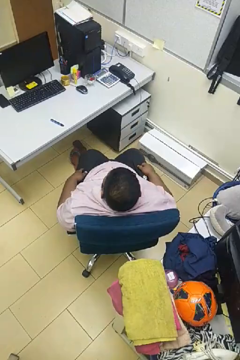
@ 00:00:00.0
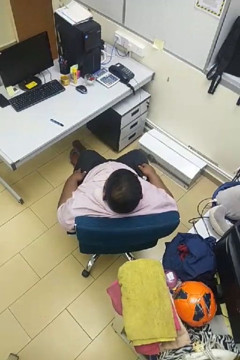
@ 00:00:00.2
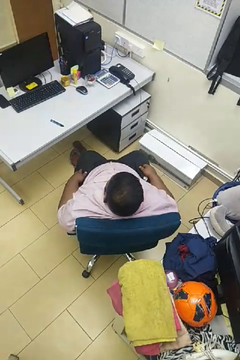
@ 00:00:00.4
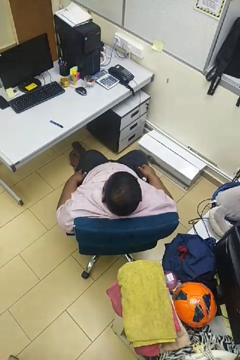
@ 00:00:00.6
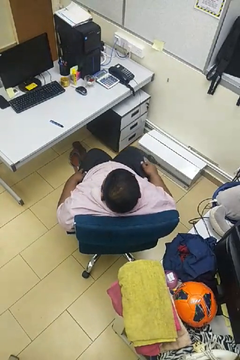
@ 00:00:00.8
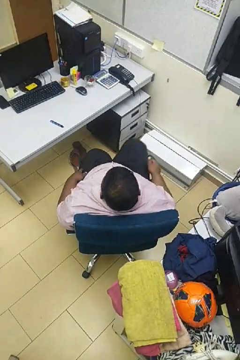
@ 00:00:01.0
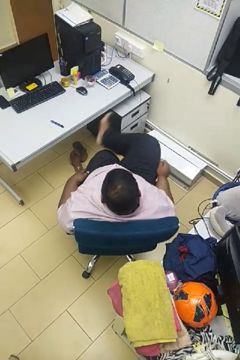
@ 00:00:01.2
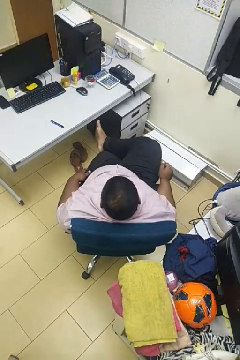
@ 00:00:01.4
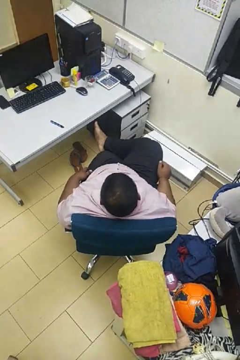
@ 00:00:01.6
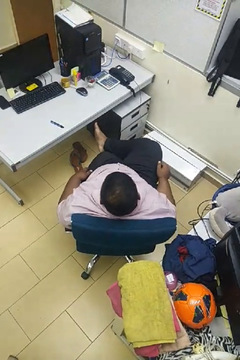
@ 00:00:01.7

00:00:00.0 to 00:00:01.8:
person crosses legs

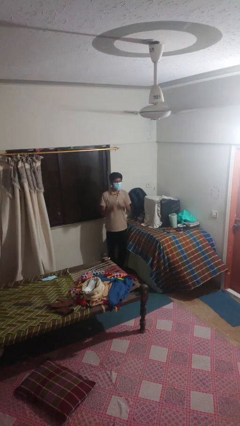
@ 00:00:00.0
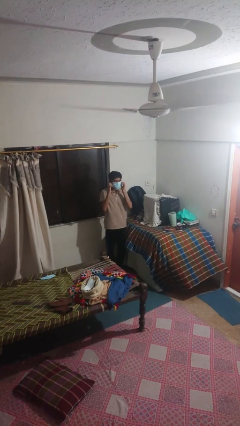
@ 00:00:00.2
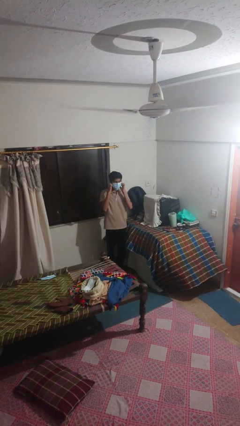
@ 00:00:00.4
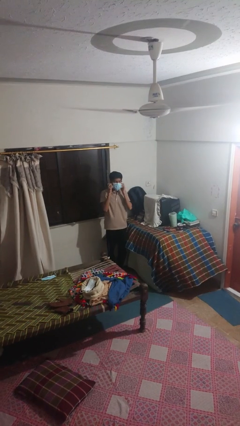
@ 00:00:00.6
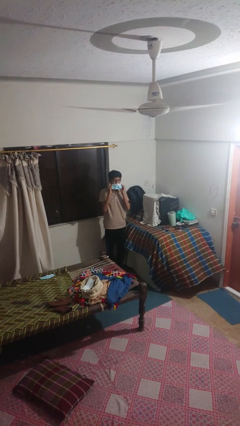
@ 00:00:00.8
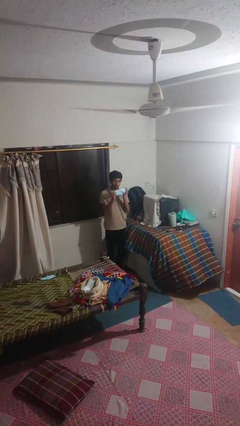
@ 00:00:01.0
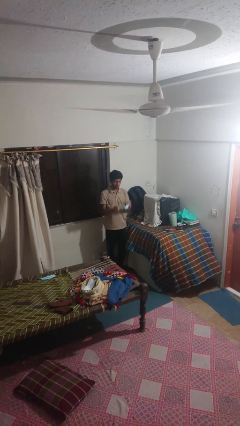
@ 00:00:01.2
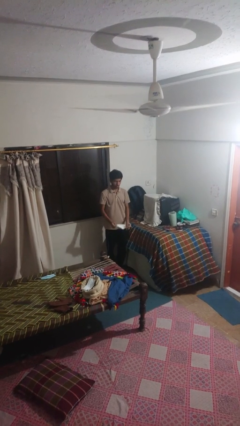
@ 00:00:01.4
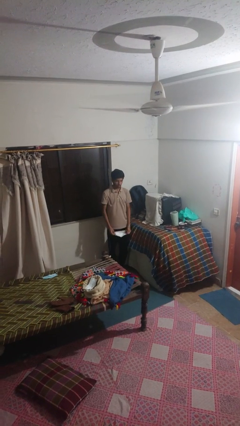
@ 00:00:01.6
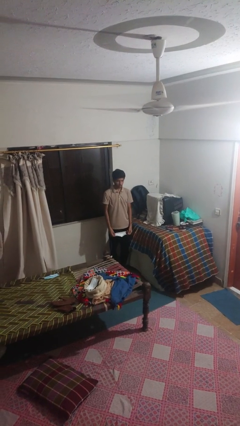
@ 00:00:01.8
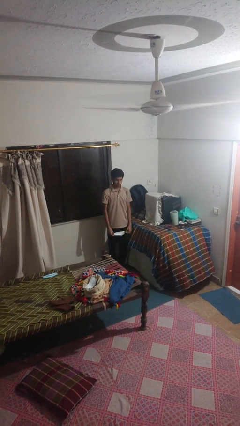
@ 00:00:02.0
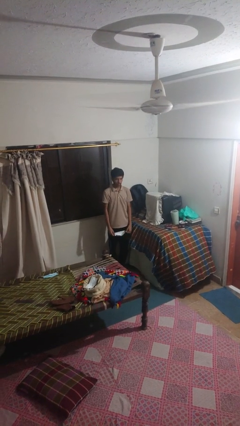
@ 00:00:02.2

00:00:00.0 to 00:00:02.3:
person takes off facemask

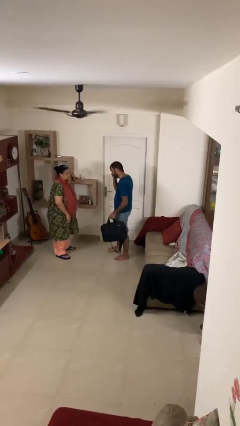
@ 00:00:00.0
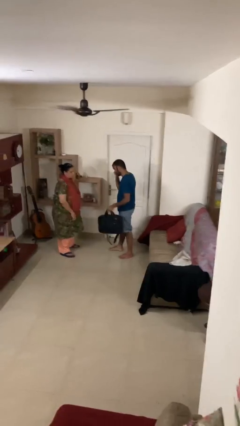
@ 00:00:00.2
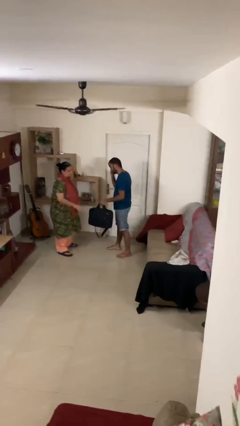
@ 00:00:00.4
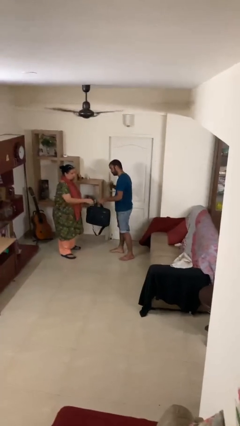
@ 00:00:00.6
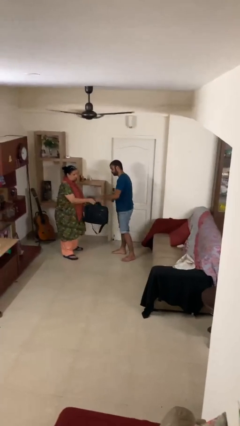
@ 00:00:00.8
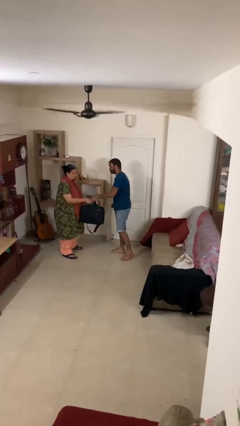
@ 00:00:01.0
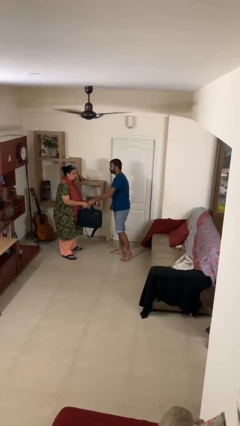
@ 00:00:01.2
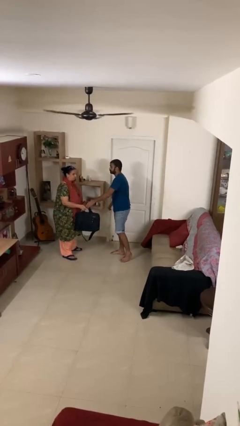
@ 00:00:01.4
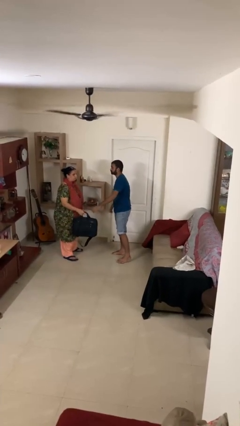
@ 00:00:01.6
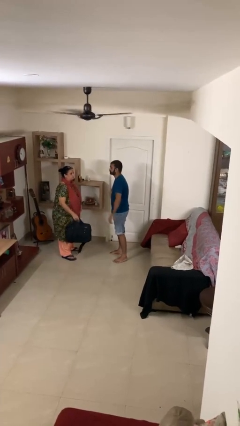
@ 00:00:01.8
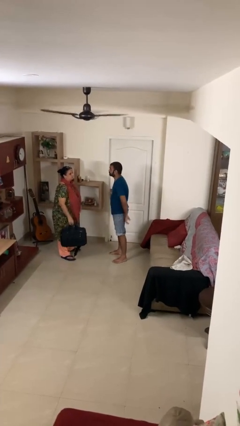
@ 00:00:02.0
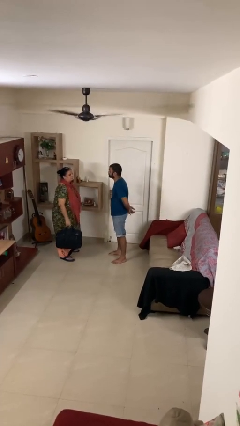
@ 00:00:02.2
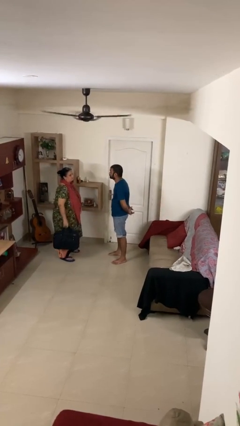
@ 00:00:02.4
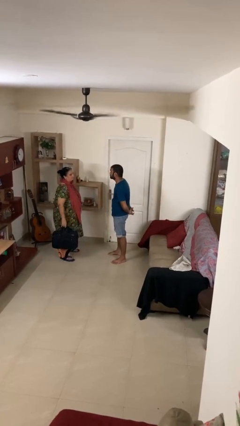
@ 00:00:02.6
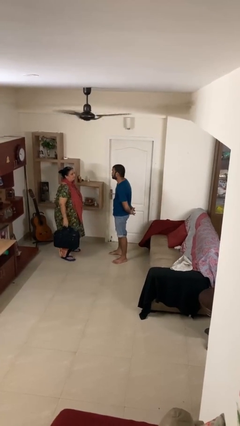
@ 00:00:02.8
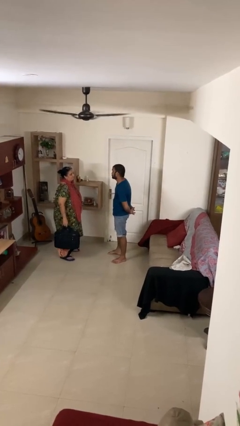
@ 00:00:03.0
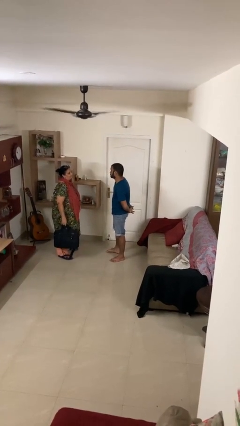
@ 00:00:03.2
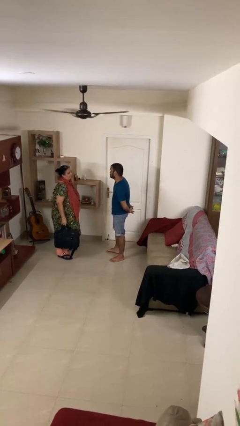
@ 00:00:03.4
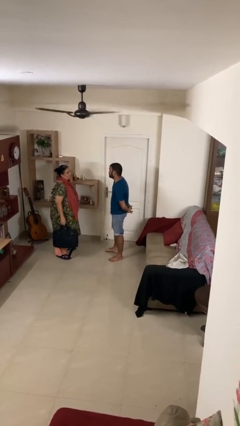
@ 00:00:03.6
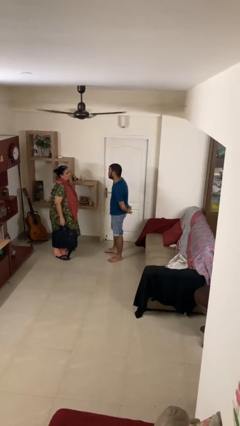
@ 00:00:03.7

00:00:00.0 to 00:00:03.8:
person transfers object to person

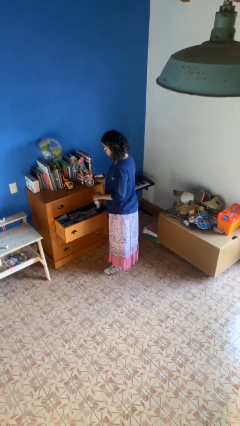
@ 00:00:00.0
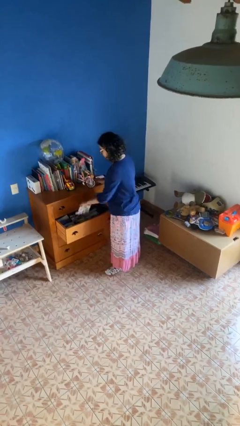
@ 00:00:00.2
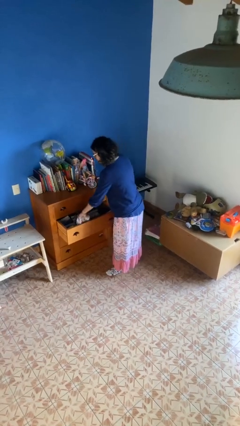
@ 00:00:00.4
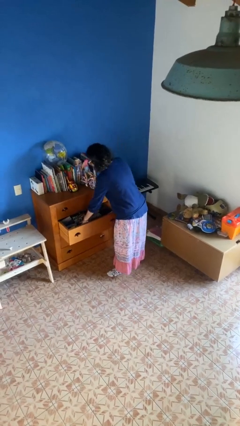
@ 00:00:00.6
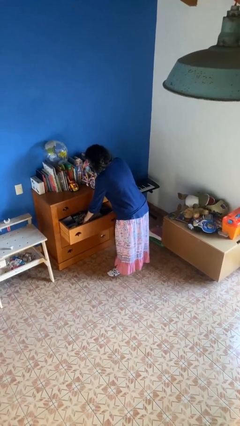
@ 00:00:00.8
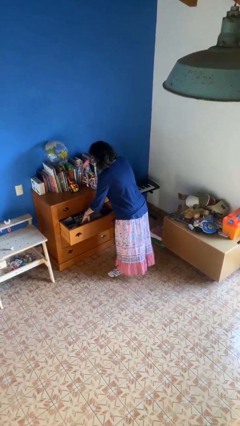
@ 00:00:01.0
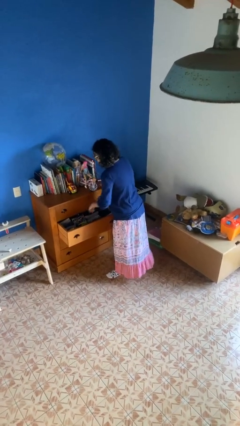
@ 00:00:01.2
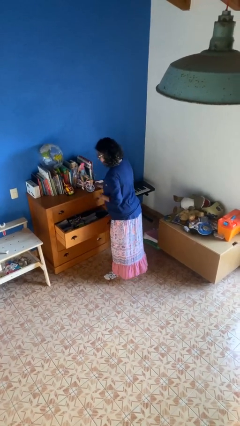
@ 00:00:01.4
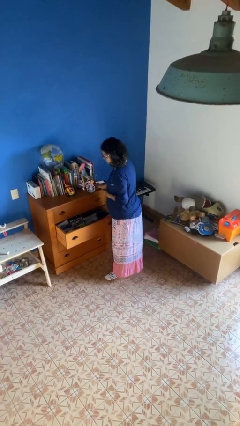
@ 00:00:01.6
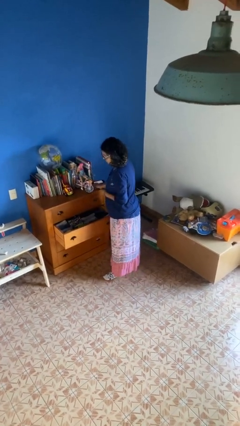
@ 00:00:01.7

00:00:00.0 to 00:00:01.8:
person puts clothes into dresser

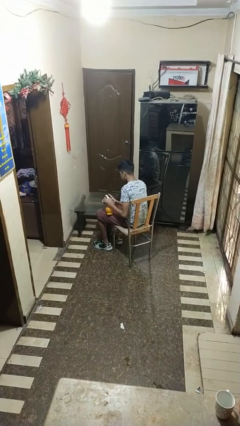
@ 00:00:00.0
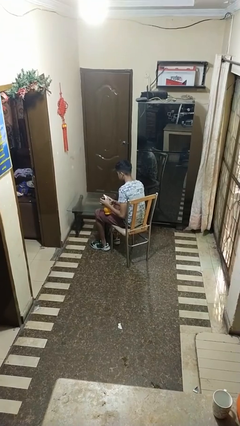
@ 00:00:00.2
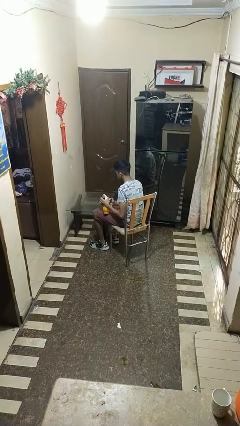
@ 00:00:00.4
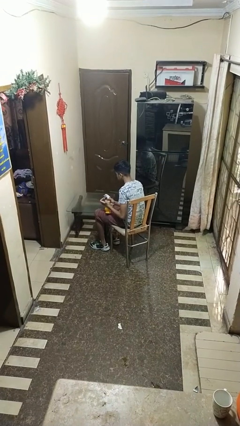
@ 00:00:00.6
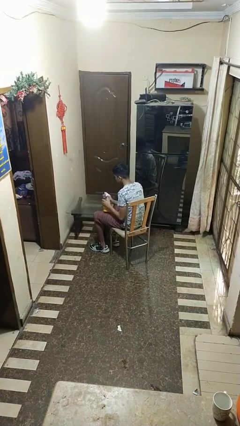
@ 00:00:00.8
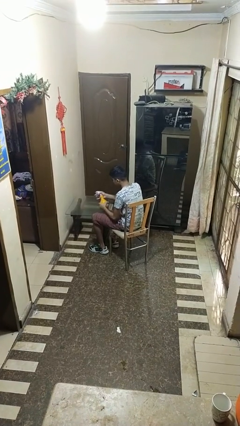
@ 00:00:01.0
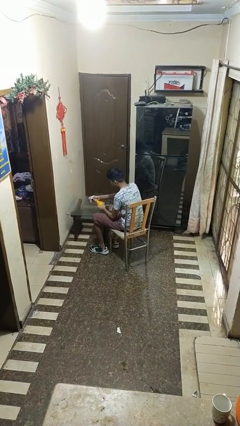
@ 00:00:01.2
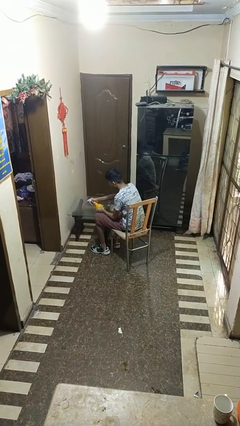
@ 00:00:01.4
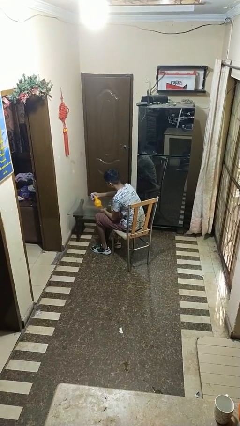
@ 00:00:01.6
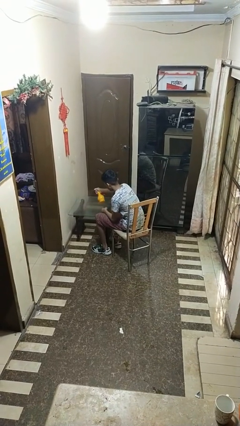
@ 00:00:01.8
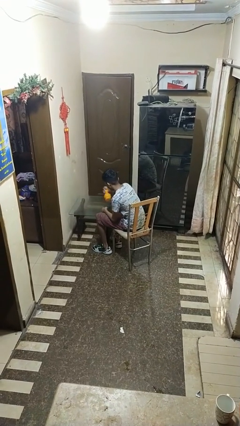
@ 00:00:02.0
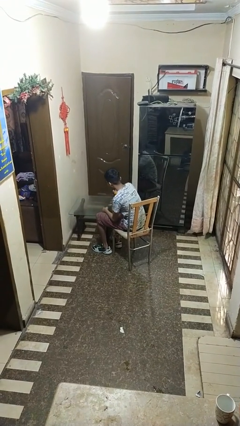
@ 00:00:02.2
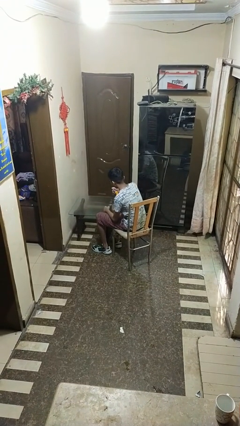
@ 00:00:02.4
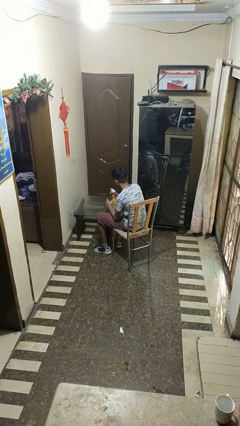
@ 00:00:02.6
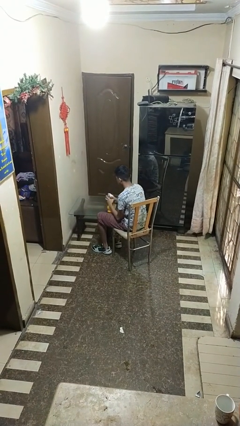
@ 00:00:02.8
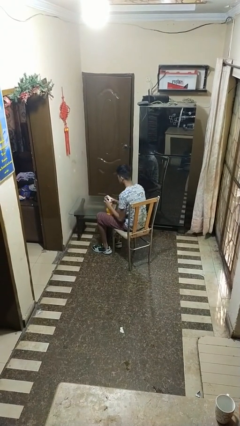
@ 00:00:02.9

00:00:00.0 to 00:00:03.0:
person sprays from bottle

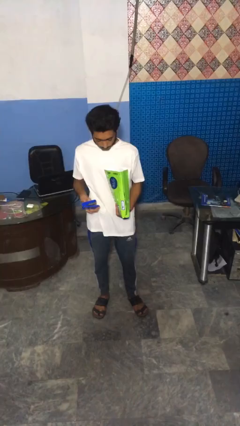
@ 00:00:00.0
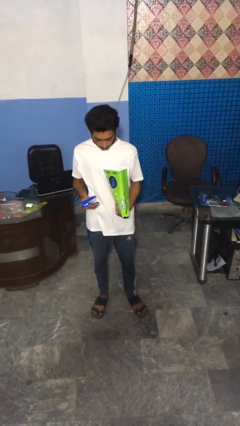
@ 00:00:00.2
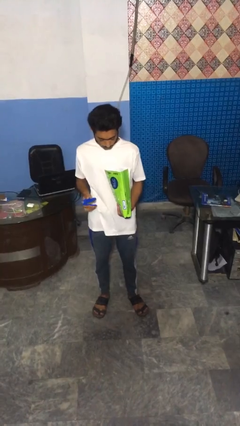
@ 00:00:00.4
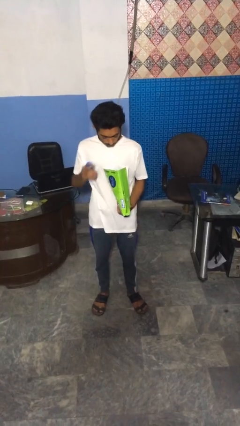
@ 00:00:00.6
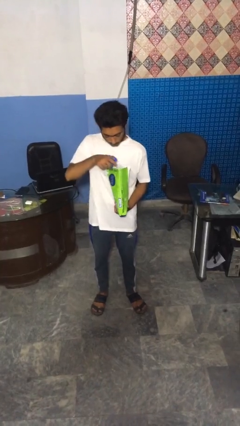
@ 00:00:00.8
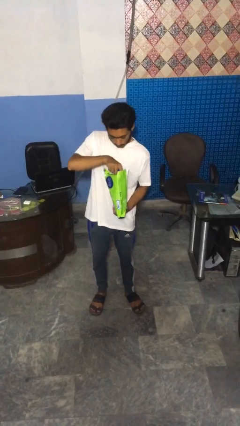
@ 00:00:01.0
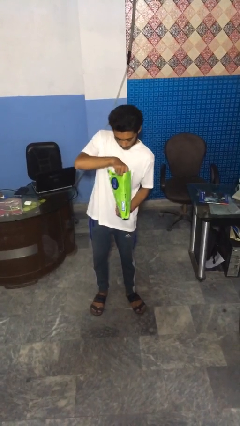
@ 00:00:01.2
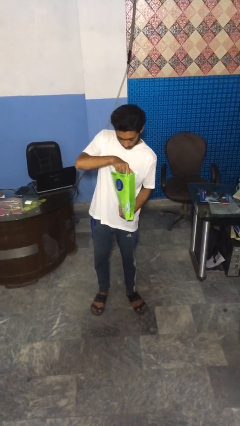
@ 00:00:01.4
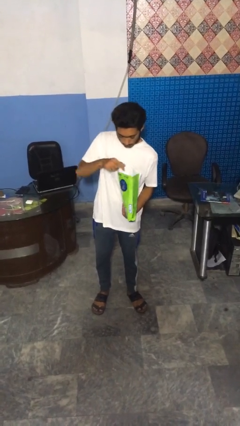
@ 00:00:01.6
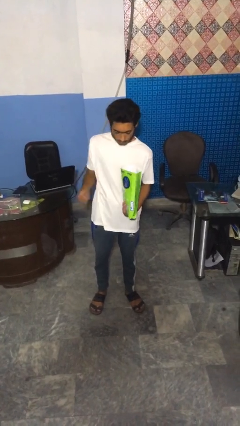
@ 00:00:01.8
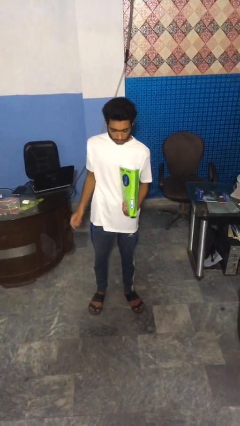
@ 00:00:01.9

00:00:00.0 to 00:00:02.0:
person puts object into bag

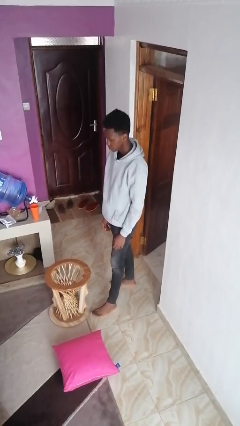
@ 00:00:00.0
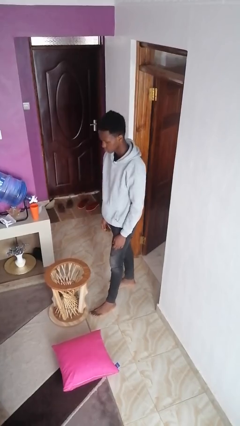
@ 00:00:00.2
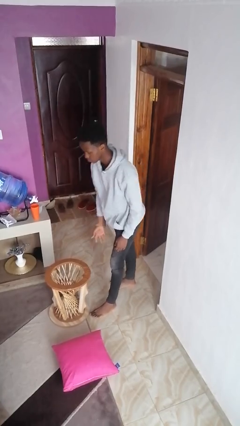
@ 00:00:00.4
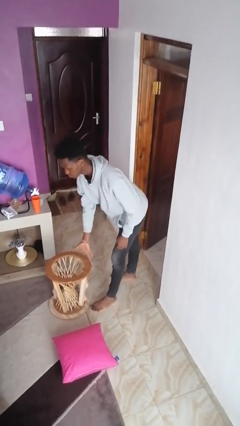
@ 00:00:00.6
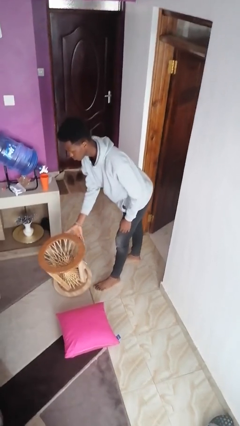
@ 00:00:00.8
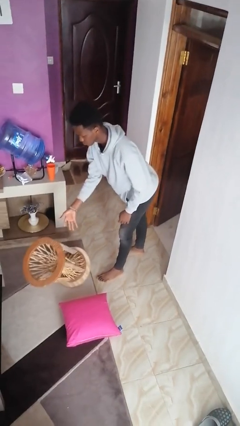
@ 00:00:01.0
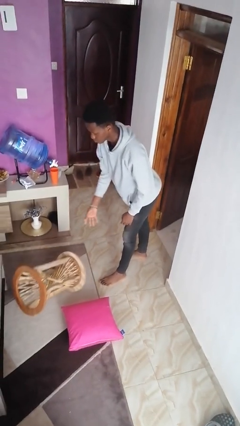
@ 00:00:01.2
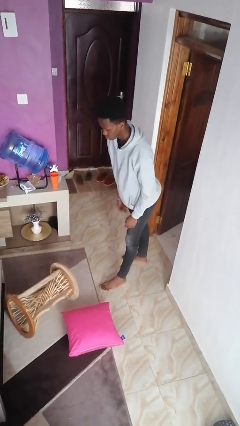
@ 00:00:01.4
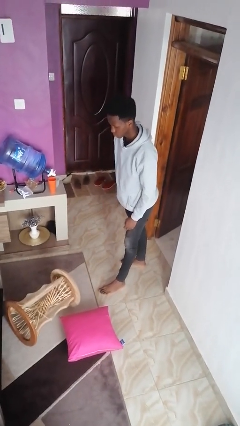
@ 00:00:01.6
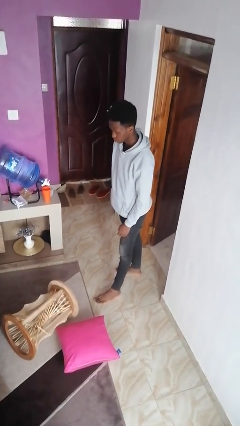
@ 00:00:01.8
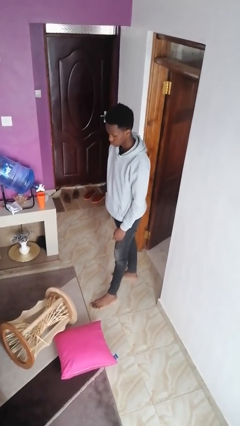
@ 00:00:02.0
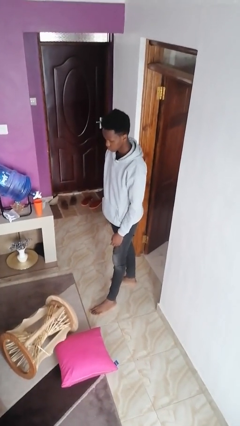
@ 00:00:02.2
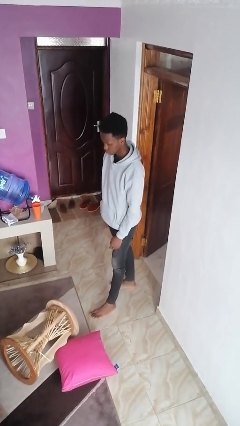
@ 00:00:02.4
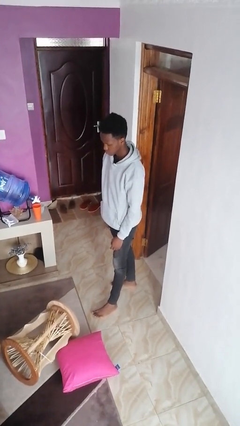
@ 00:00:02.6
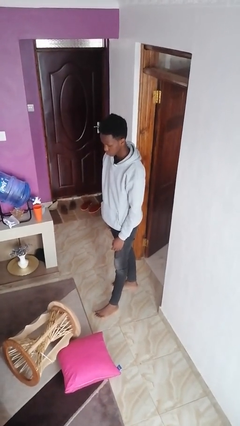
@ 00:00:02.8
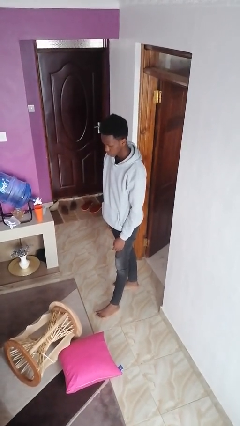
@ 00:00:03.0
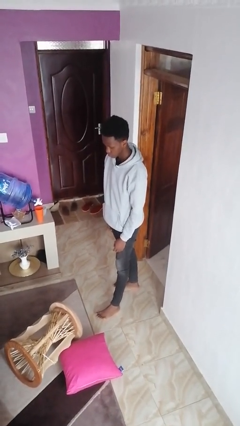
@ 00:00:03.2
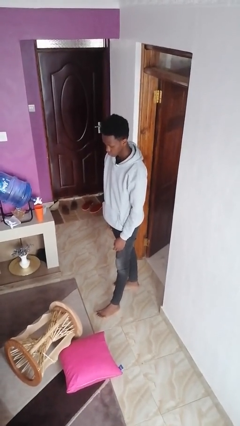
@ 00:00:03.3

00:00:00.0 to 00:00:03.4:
person knocks over furniture
